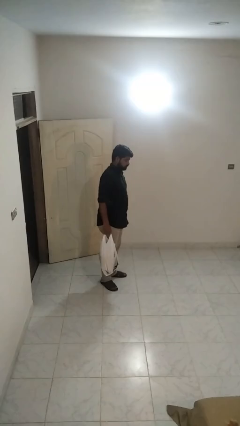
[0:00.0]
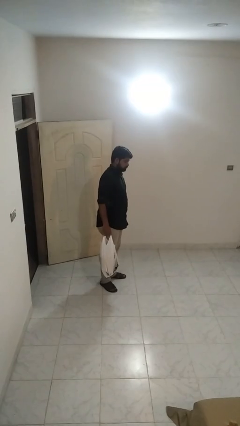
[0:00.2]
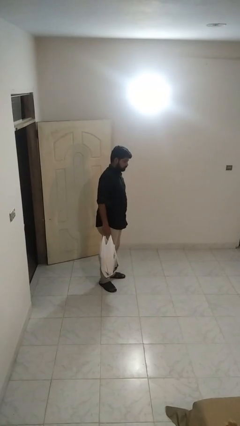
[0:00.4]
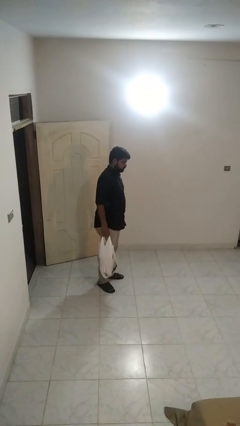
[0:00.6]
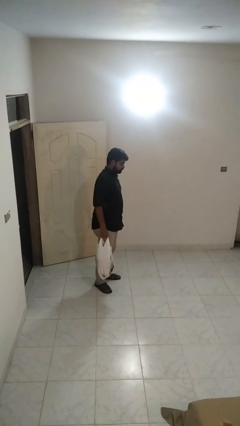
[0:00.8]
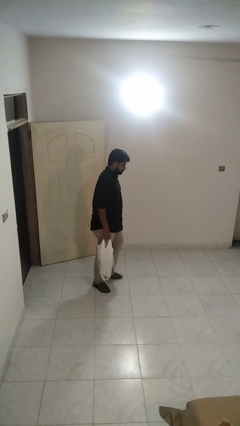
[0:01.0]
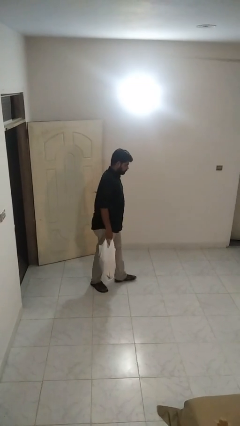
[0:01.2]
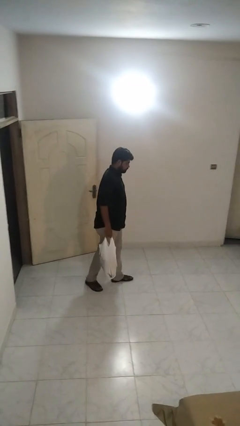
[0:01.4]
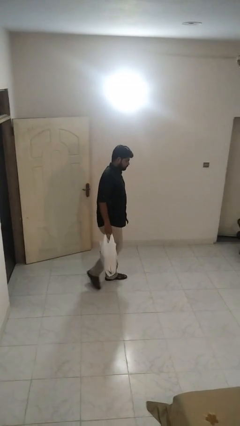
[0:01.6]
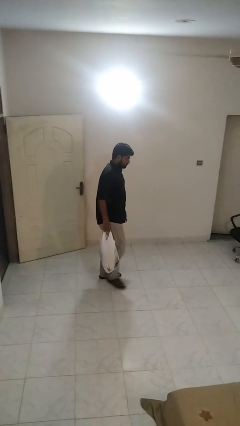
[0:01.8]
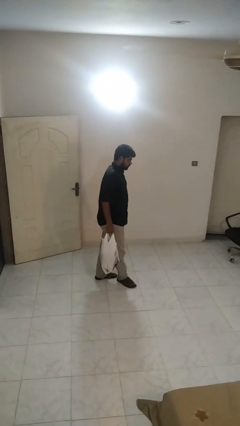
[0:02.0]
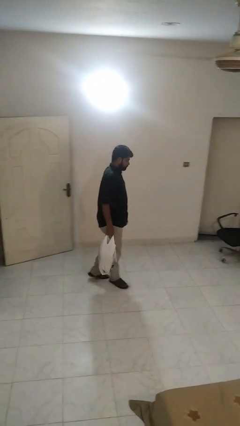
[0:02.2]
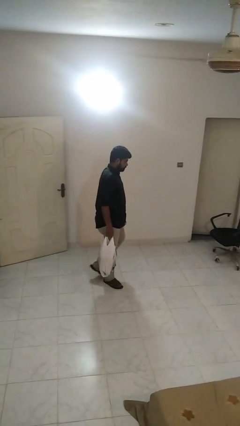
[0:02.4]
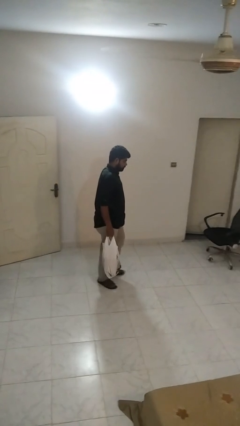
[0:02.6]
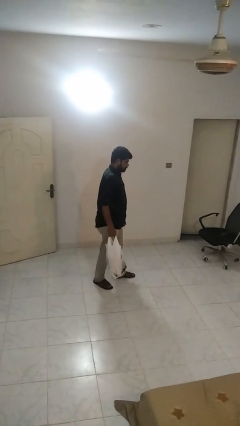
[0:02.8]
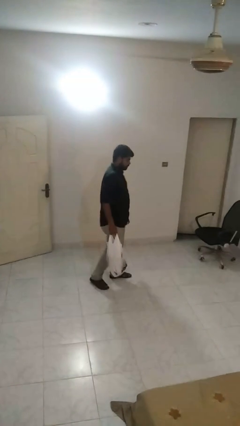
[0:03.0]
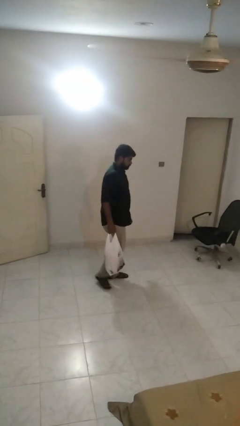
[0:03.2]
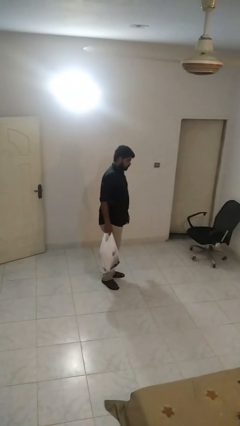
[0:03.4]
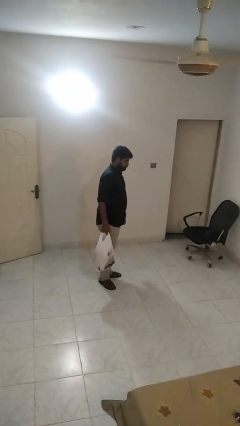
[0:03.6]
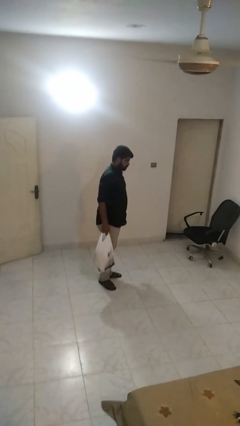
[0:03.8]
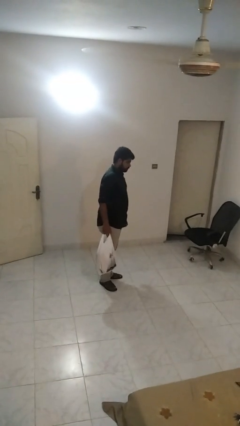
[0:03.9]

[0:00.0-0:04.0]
person carries groceries

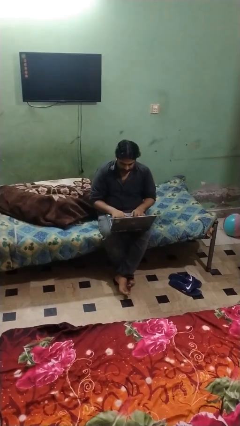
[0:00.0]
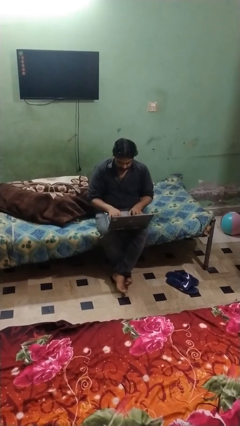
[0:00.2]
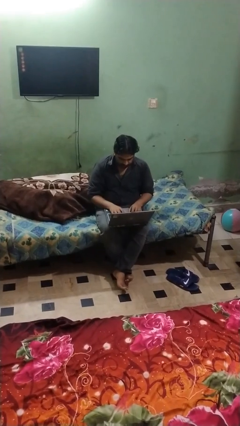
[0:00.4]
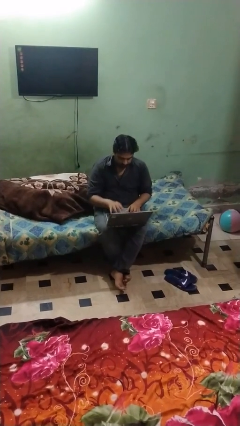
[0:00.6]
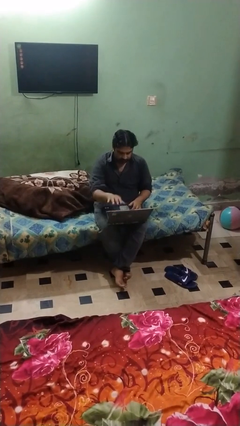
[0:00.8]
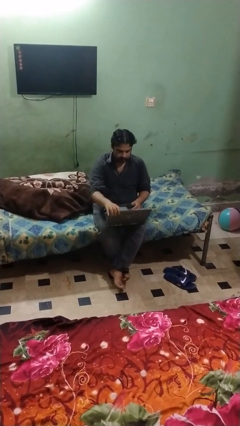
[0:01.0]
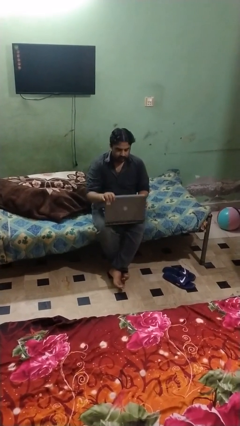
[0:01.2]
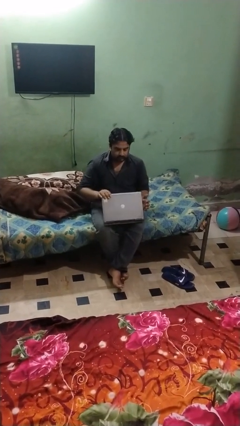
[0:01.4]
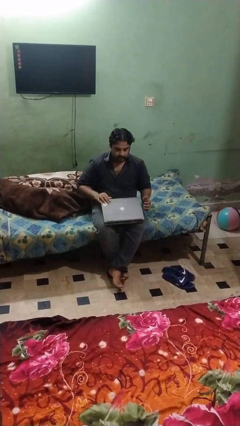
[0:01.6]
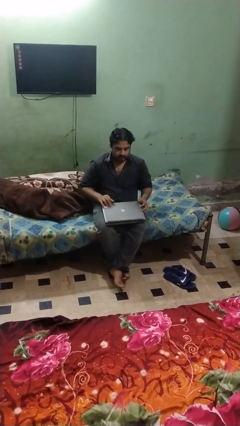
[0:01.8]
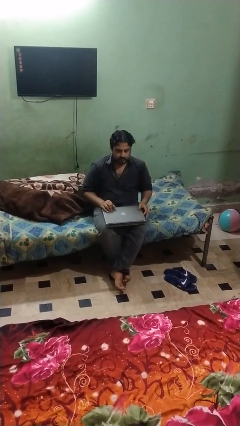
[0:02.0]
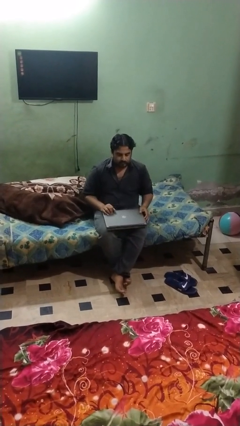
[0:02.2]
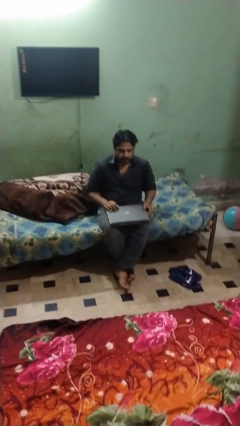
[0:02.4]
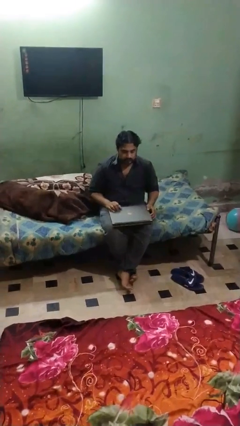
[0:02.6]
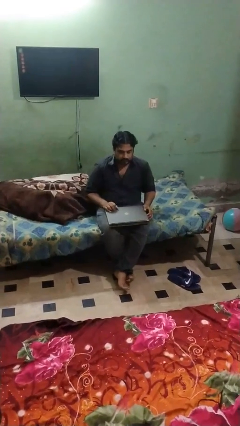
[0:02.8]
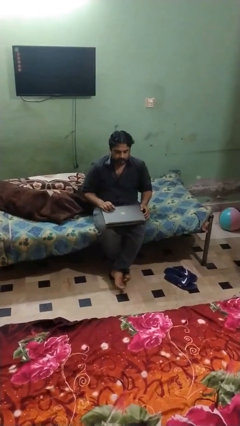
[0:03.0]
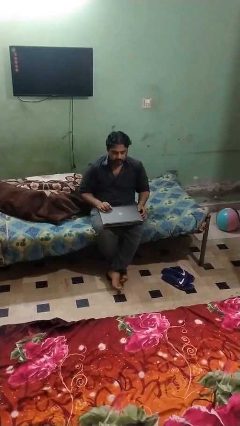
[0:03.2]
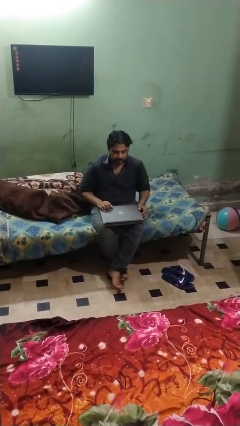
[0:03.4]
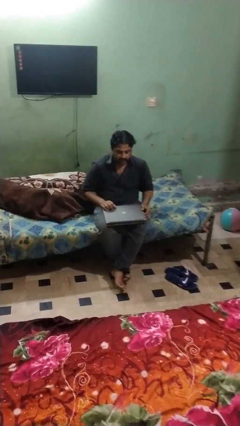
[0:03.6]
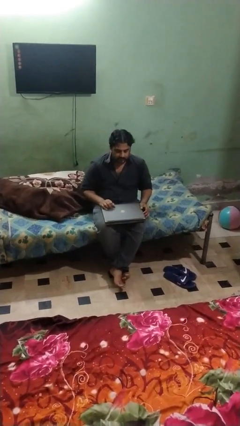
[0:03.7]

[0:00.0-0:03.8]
person closes laptop

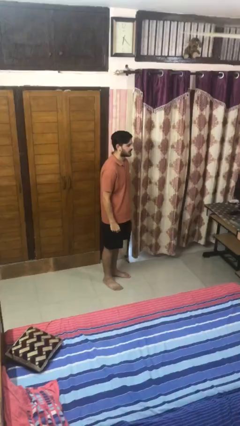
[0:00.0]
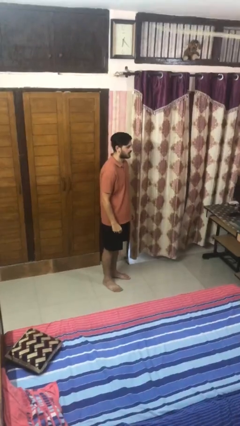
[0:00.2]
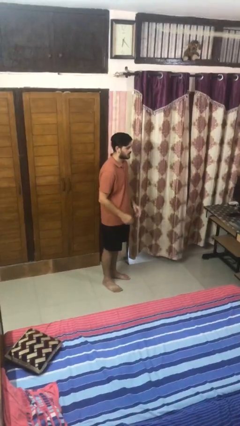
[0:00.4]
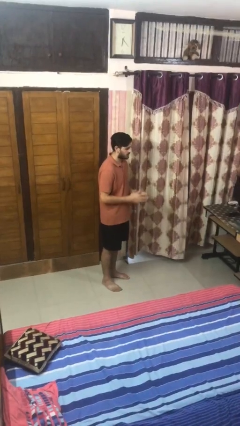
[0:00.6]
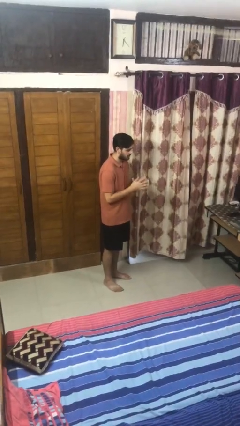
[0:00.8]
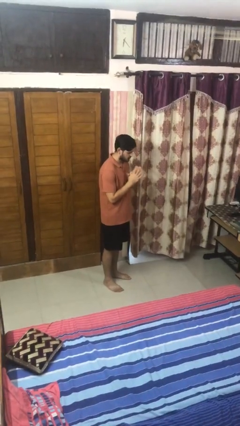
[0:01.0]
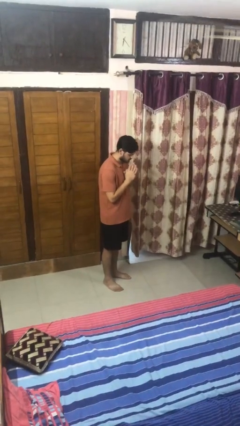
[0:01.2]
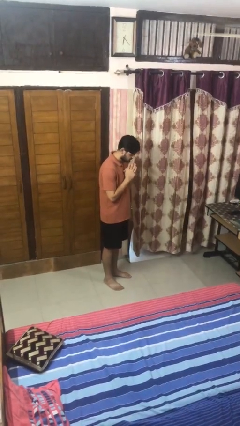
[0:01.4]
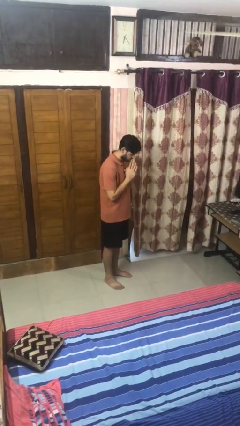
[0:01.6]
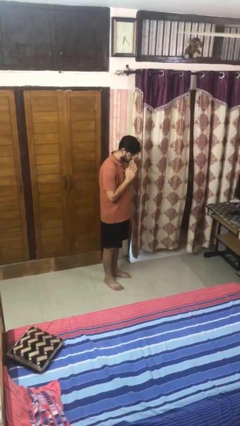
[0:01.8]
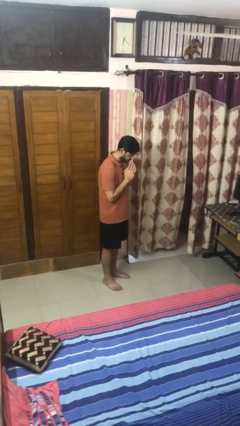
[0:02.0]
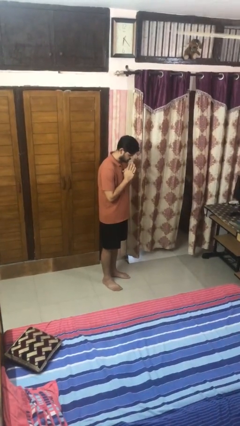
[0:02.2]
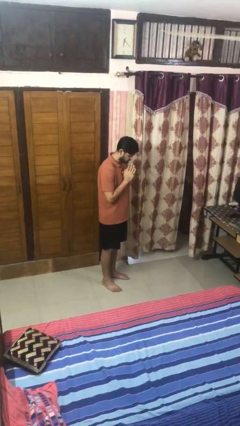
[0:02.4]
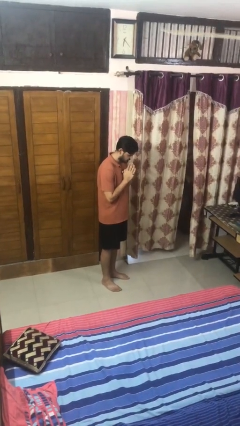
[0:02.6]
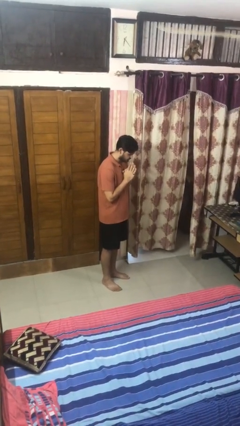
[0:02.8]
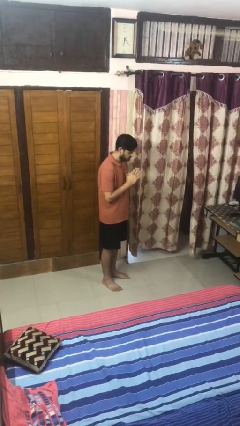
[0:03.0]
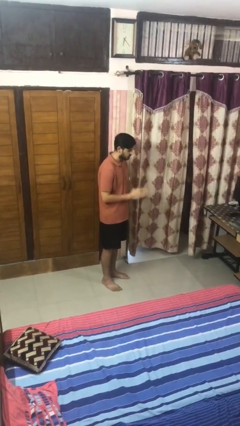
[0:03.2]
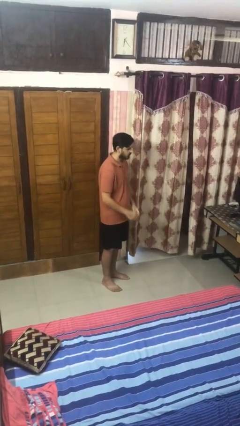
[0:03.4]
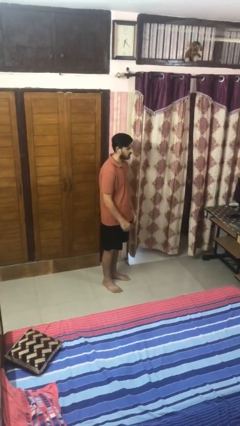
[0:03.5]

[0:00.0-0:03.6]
person prays

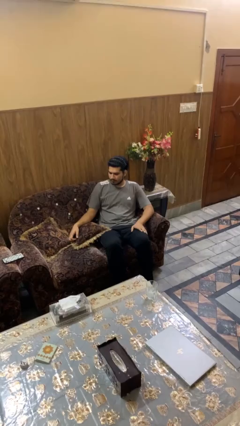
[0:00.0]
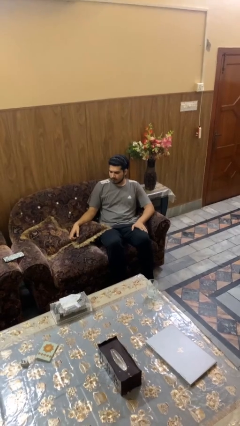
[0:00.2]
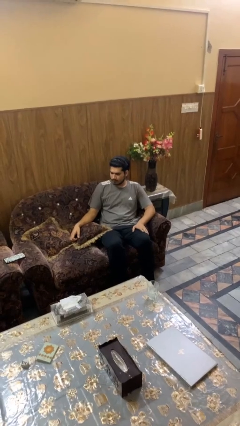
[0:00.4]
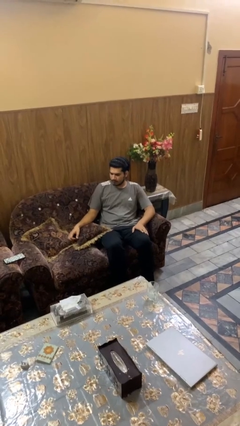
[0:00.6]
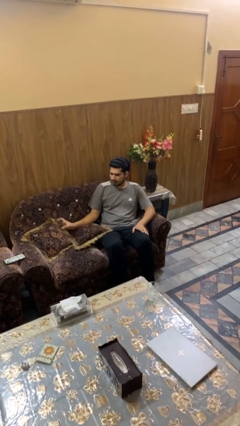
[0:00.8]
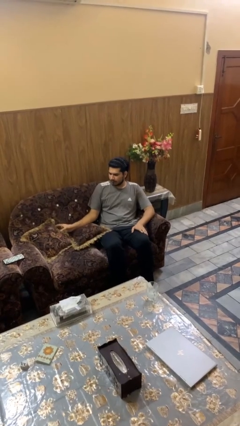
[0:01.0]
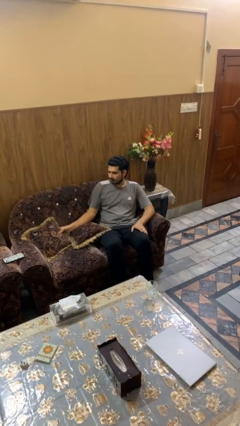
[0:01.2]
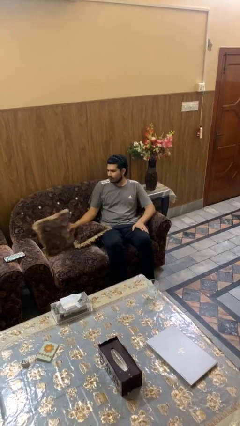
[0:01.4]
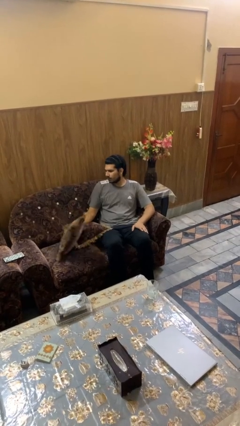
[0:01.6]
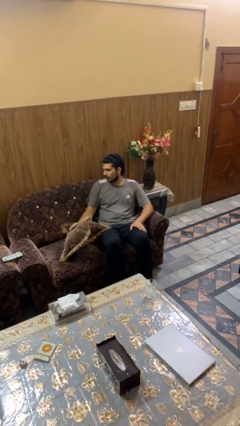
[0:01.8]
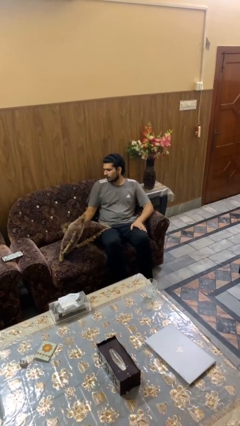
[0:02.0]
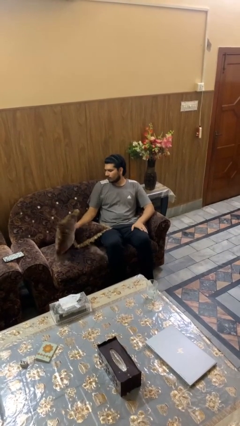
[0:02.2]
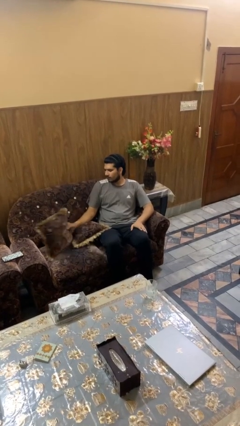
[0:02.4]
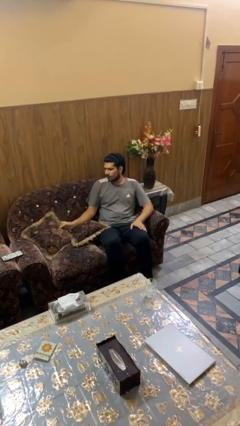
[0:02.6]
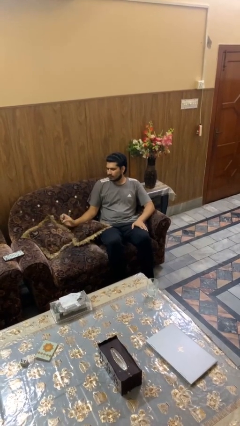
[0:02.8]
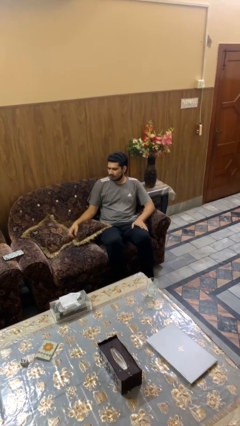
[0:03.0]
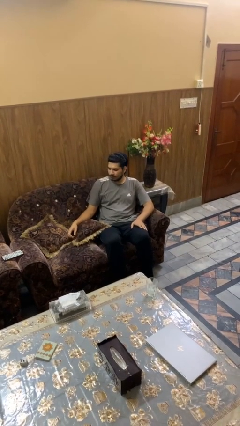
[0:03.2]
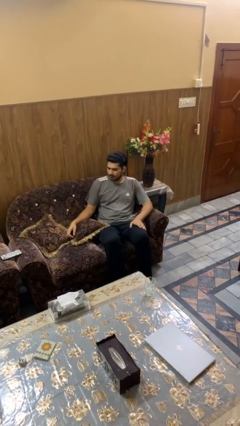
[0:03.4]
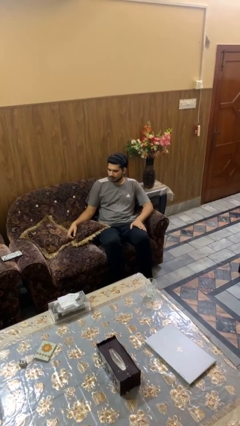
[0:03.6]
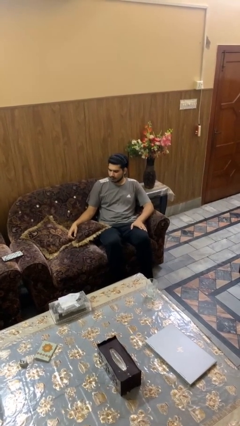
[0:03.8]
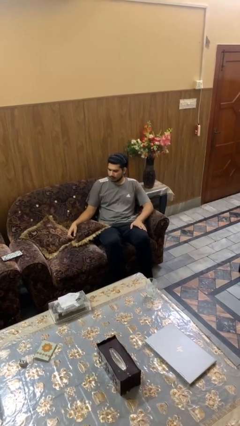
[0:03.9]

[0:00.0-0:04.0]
person searches in couch

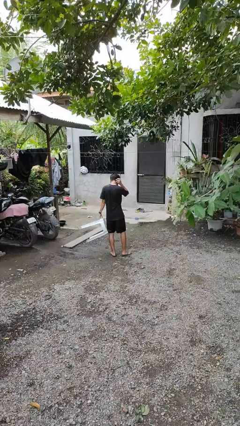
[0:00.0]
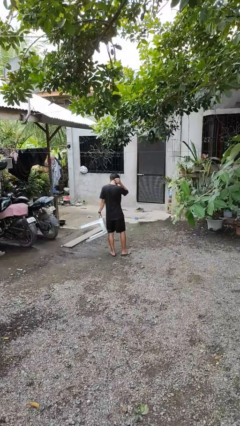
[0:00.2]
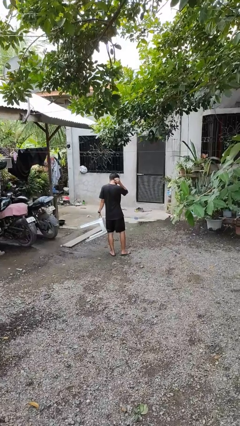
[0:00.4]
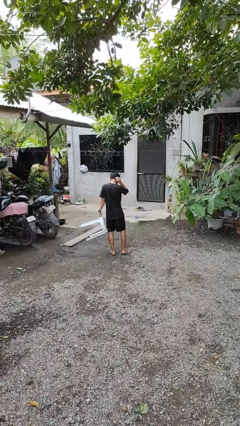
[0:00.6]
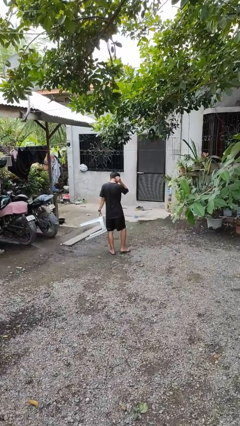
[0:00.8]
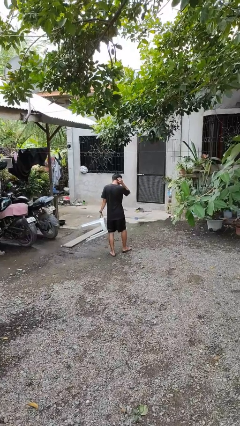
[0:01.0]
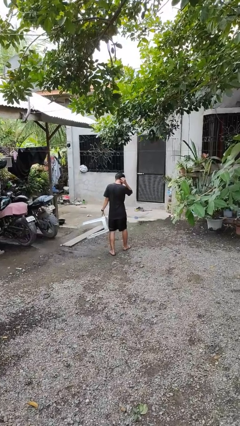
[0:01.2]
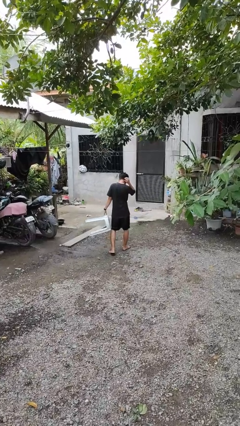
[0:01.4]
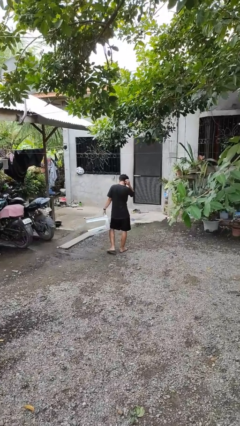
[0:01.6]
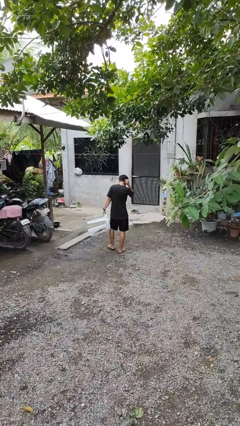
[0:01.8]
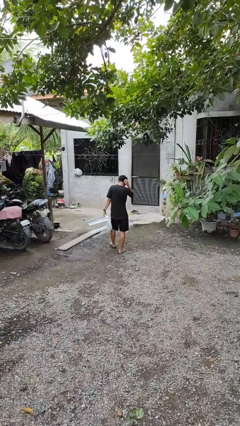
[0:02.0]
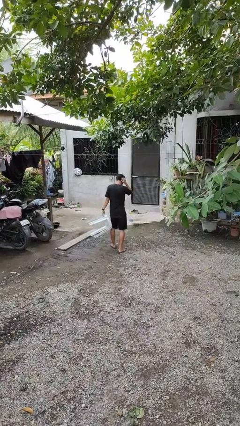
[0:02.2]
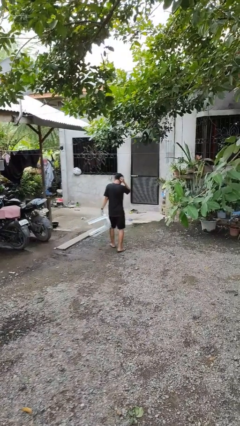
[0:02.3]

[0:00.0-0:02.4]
person carries furniture
